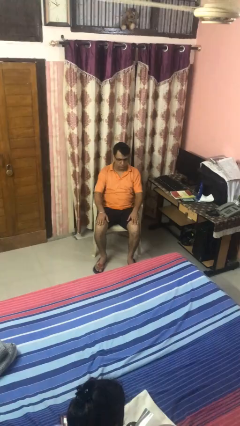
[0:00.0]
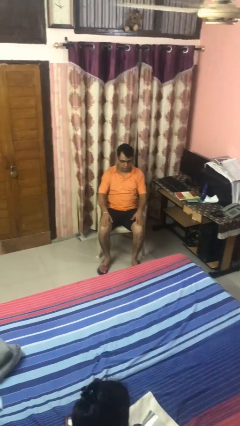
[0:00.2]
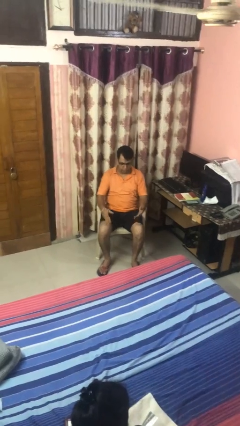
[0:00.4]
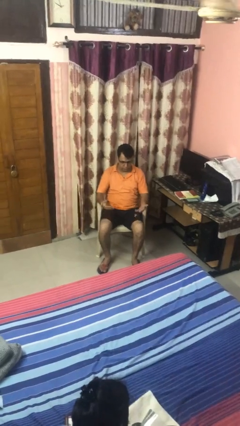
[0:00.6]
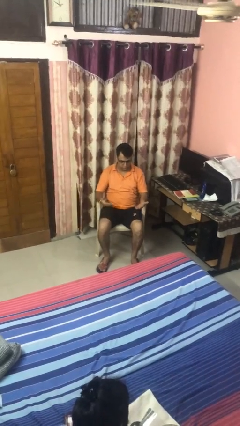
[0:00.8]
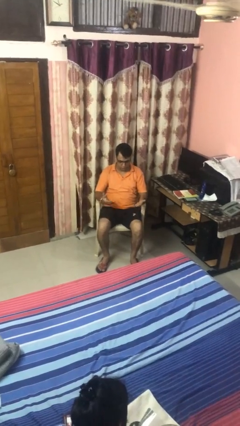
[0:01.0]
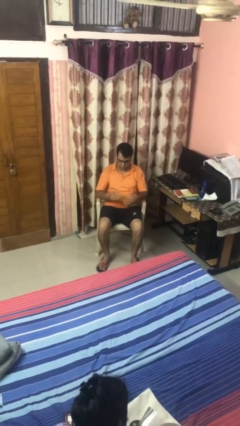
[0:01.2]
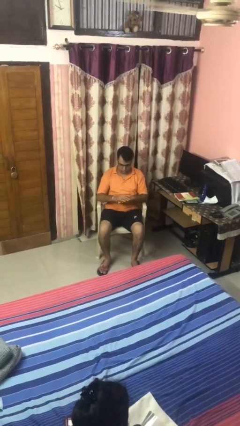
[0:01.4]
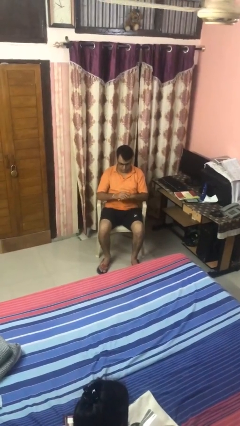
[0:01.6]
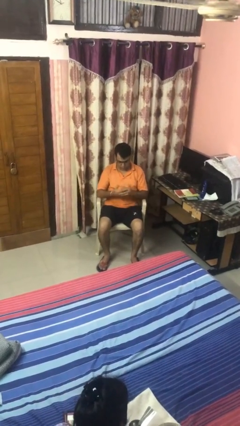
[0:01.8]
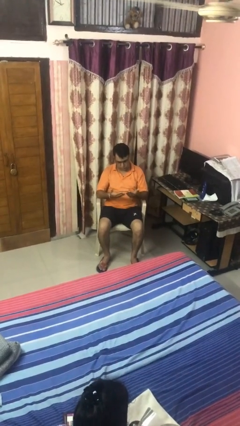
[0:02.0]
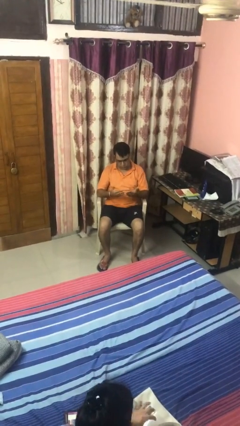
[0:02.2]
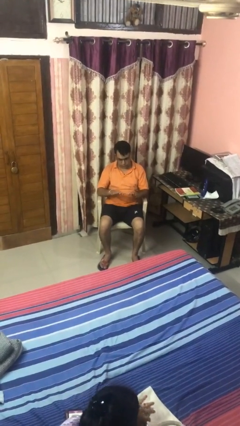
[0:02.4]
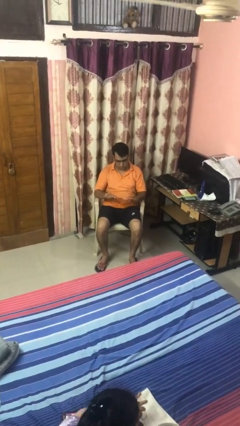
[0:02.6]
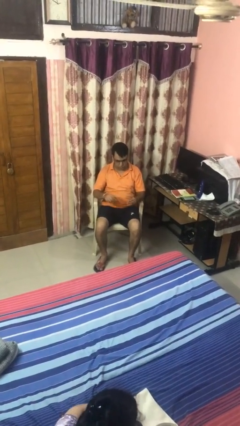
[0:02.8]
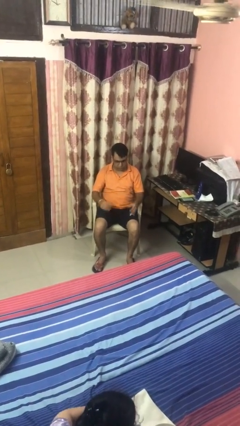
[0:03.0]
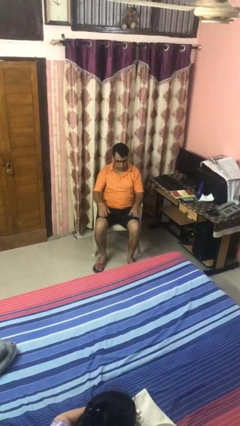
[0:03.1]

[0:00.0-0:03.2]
person looks at hands in lap

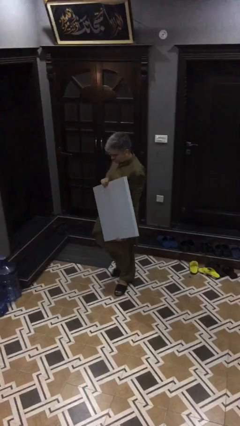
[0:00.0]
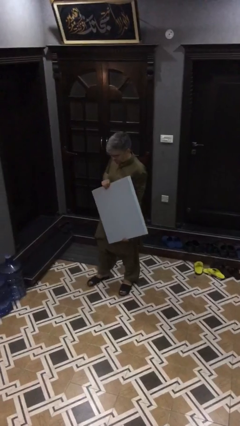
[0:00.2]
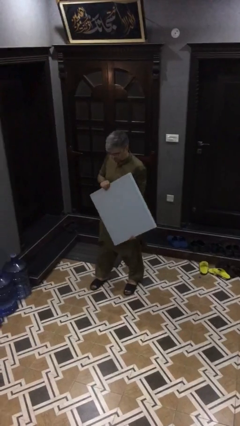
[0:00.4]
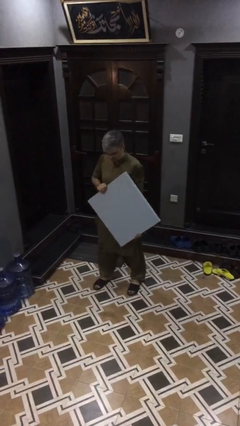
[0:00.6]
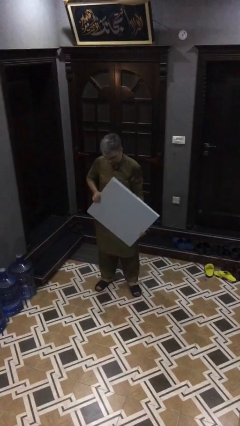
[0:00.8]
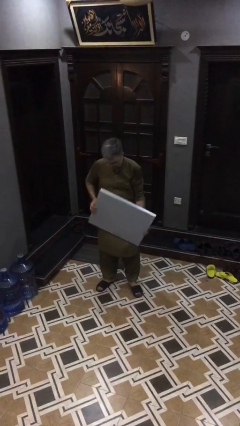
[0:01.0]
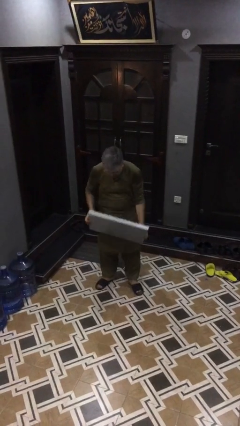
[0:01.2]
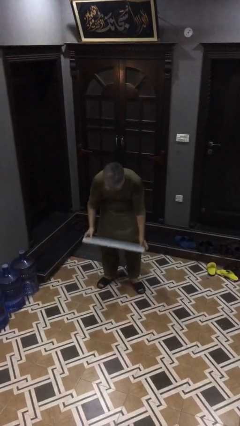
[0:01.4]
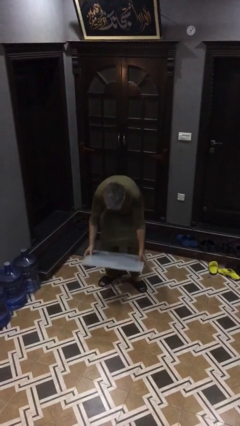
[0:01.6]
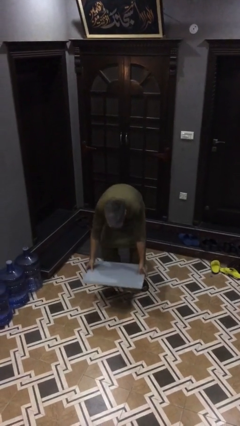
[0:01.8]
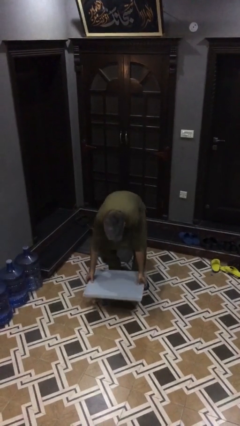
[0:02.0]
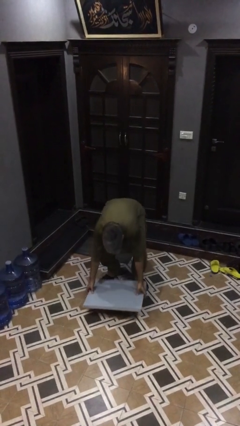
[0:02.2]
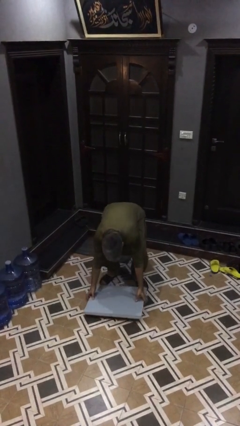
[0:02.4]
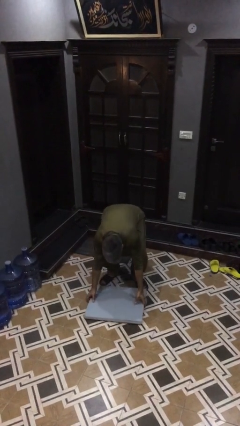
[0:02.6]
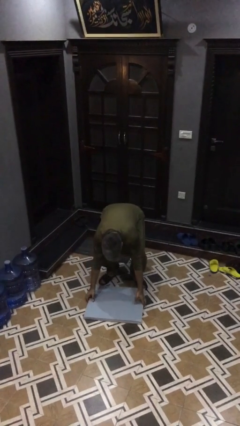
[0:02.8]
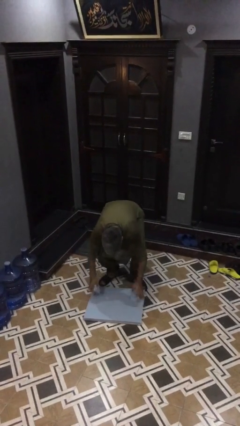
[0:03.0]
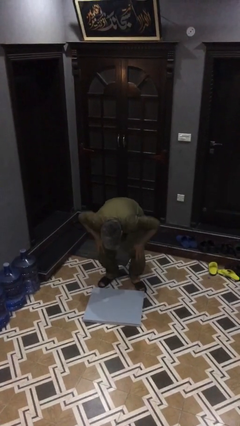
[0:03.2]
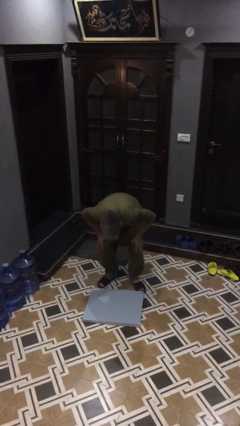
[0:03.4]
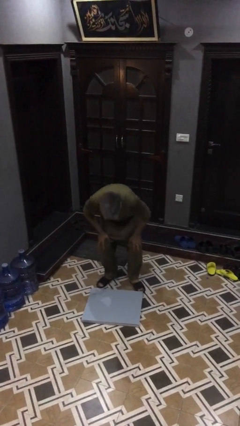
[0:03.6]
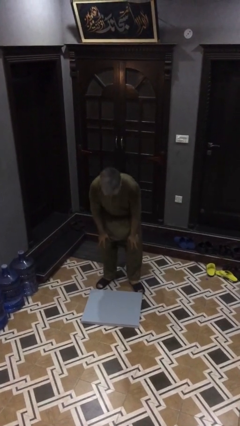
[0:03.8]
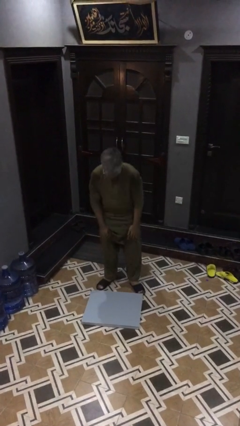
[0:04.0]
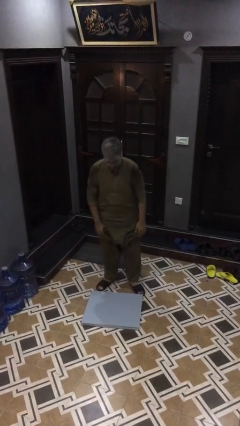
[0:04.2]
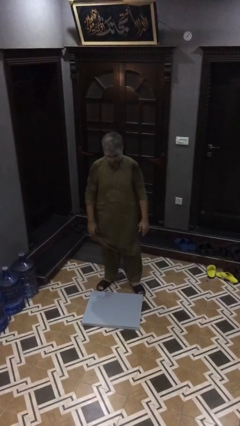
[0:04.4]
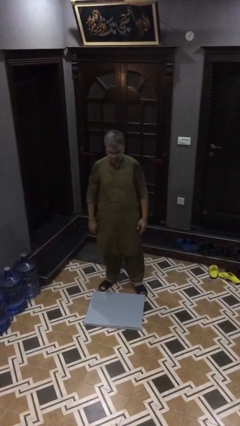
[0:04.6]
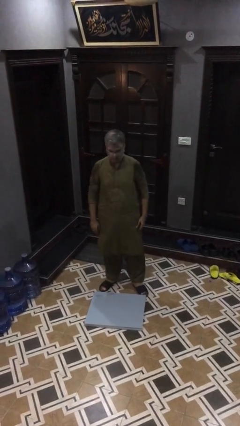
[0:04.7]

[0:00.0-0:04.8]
person puts down object on floor

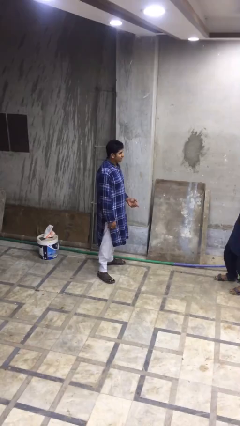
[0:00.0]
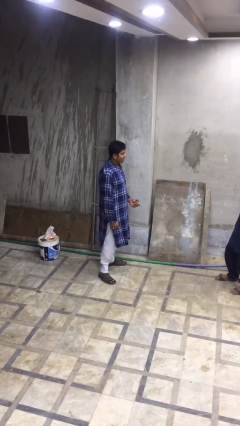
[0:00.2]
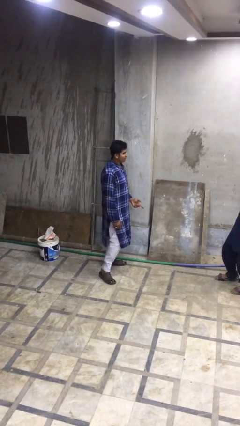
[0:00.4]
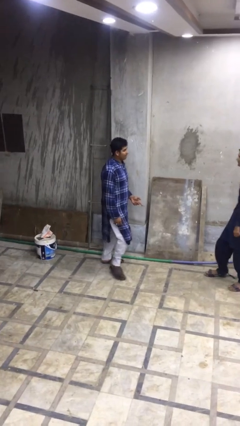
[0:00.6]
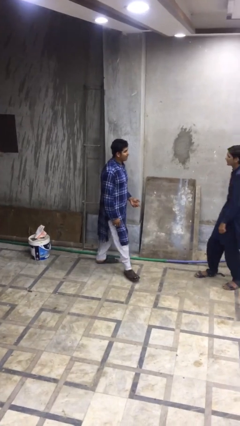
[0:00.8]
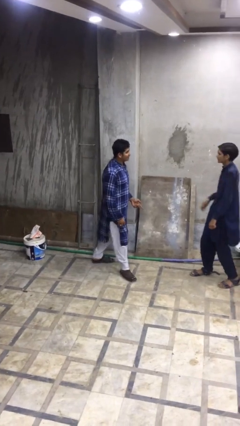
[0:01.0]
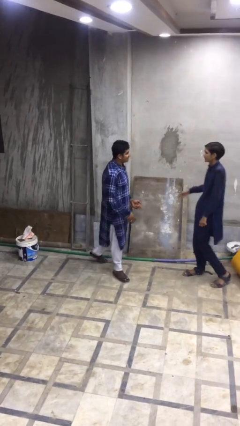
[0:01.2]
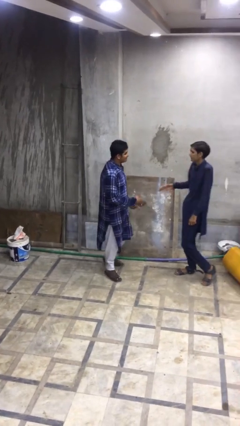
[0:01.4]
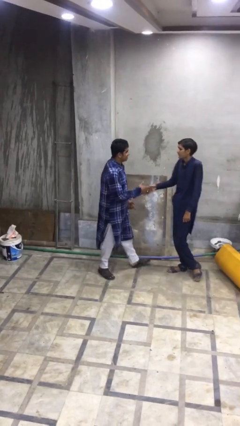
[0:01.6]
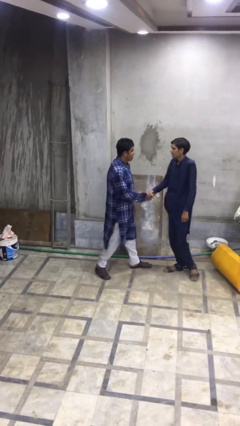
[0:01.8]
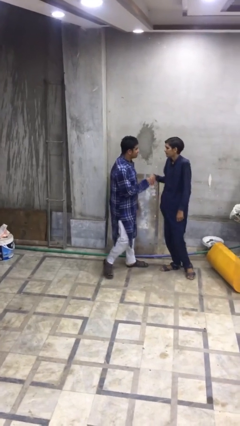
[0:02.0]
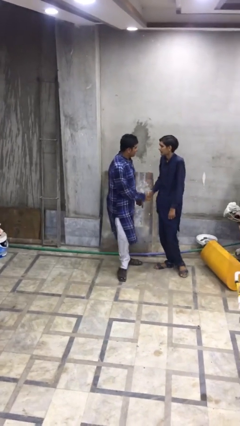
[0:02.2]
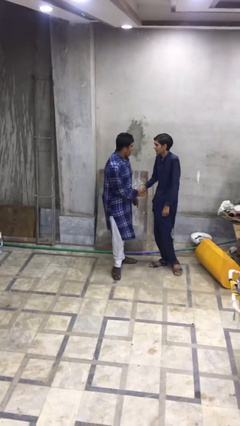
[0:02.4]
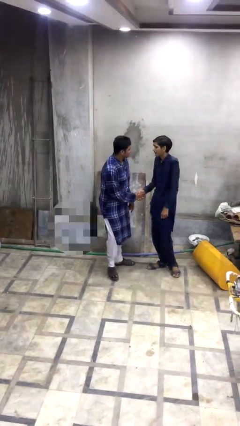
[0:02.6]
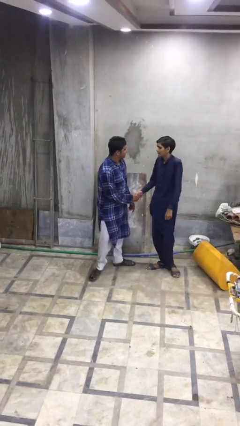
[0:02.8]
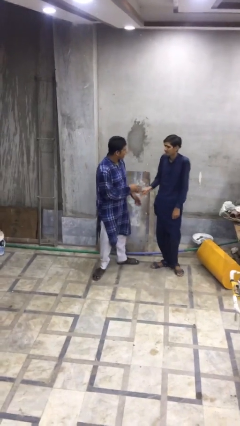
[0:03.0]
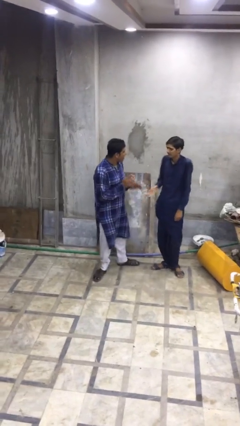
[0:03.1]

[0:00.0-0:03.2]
person shakes hand

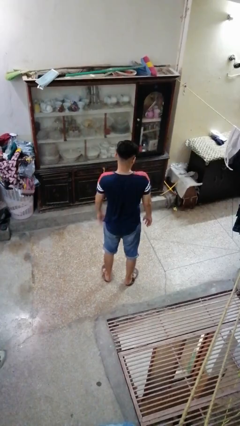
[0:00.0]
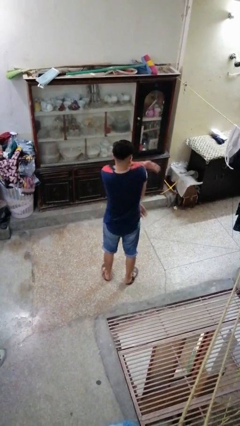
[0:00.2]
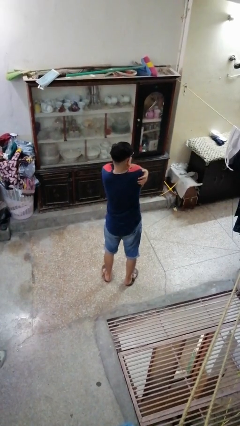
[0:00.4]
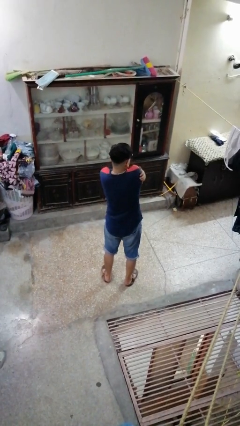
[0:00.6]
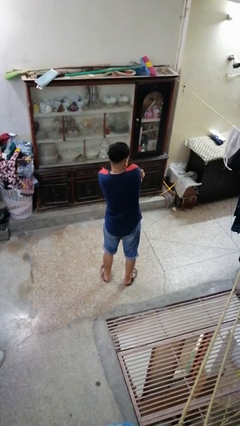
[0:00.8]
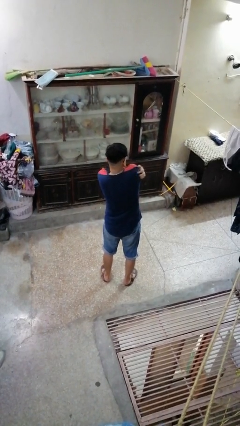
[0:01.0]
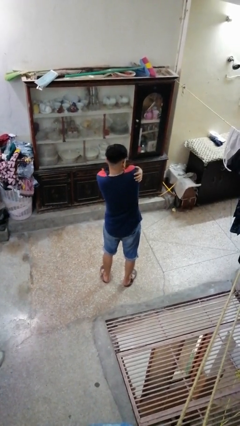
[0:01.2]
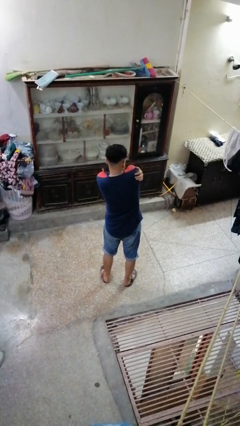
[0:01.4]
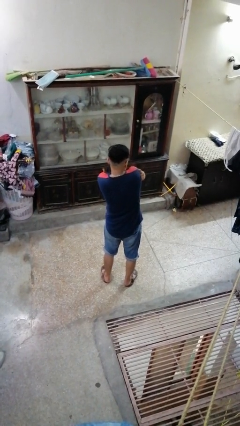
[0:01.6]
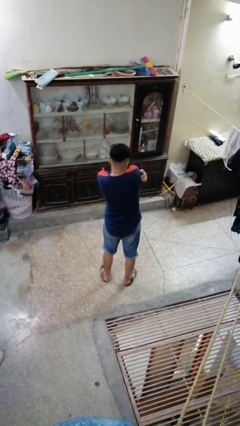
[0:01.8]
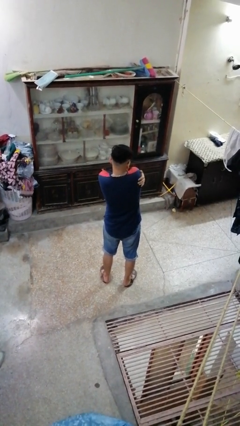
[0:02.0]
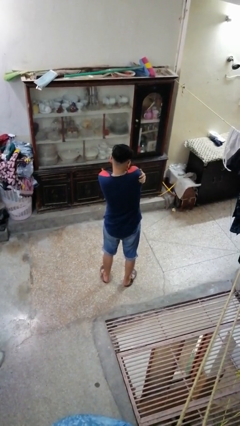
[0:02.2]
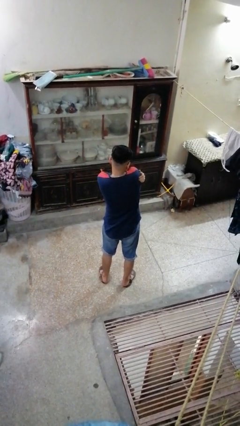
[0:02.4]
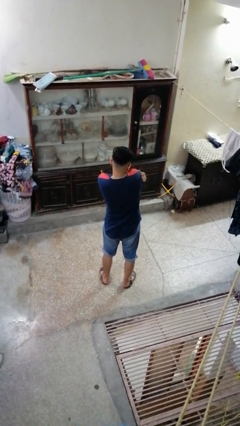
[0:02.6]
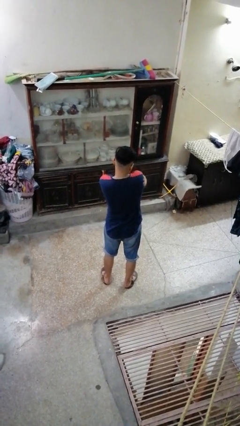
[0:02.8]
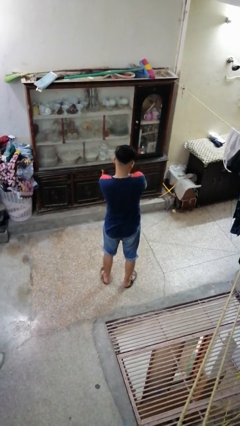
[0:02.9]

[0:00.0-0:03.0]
person swats bug

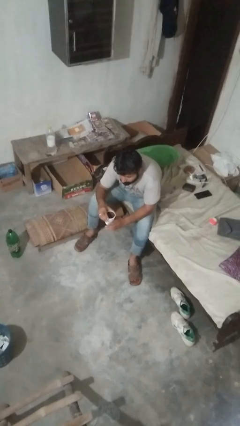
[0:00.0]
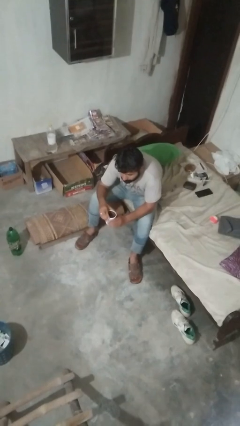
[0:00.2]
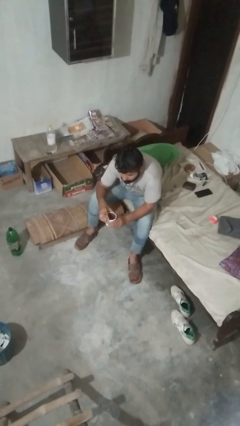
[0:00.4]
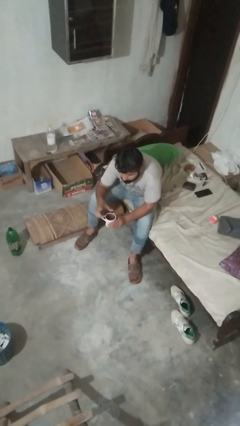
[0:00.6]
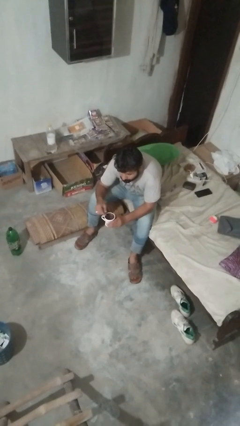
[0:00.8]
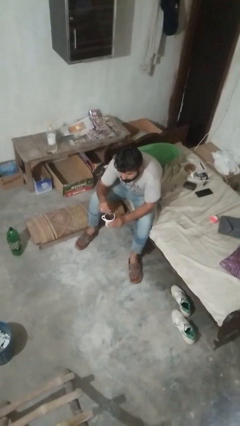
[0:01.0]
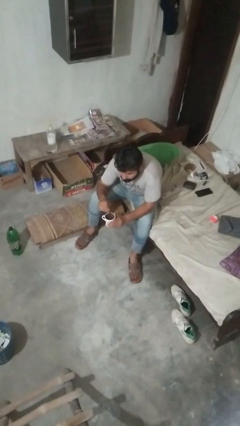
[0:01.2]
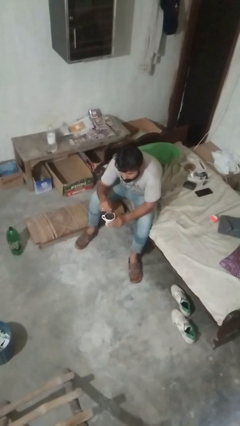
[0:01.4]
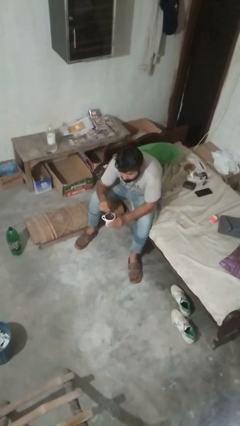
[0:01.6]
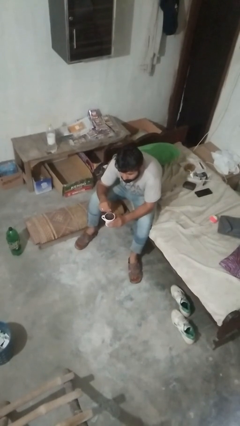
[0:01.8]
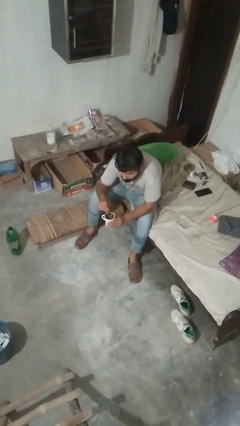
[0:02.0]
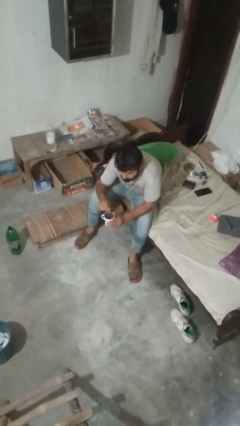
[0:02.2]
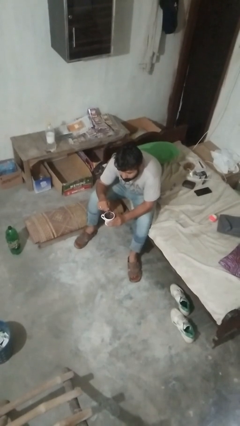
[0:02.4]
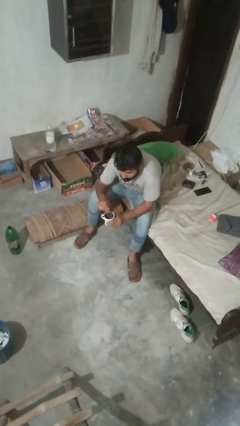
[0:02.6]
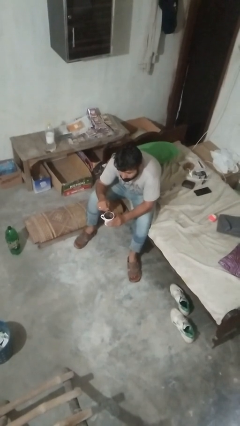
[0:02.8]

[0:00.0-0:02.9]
person stirs mug

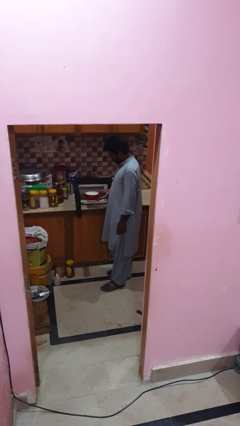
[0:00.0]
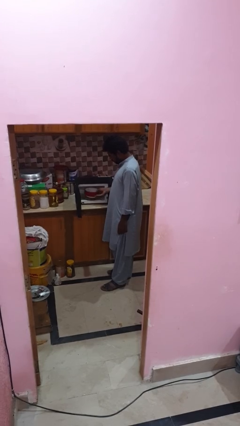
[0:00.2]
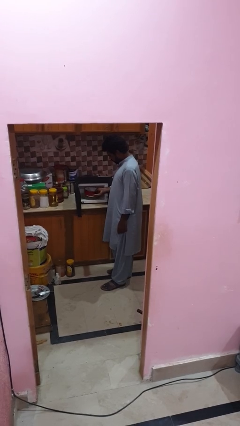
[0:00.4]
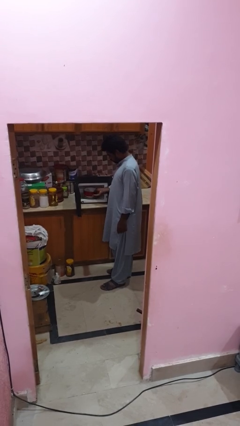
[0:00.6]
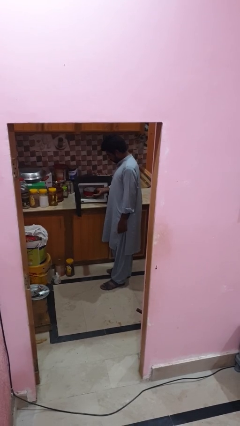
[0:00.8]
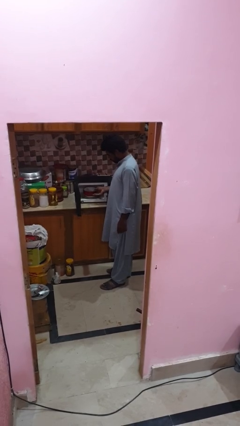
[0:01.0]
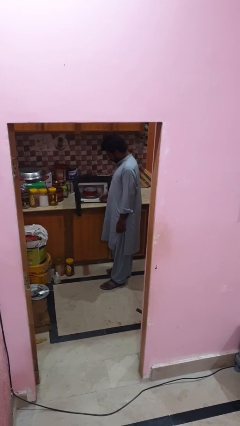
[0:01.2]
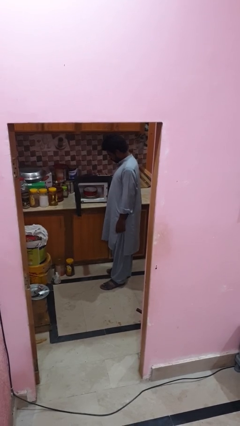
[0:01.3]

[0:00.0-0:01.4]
person puts object into microwave
